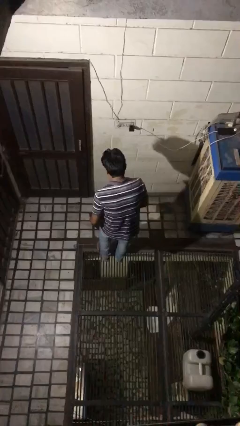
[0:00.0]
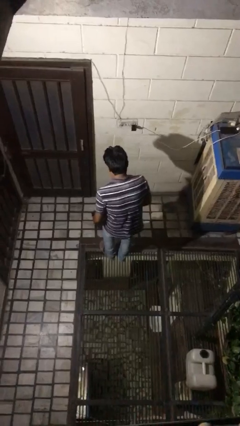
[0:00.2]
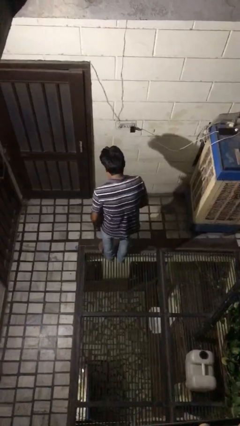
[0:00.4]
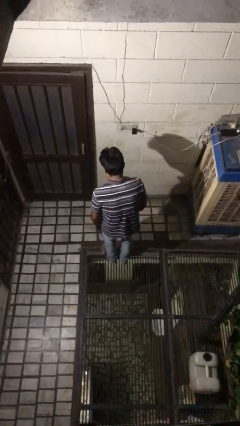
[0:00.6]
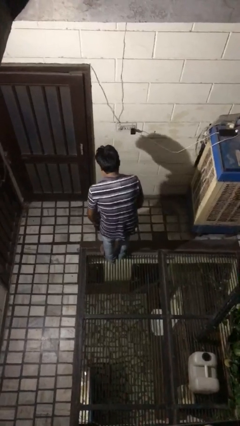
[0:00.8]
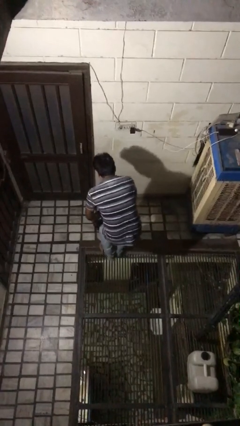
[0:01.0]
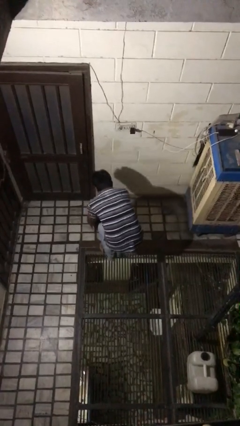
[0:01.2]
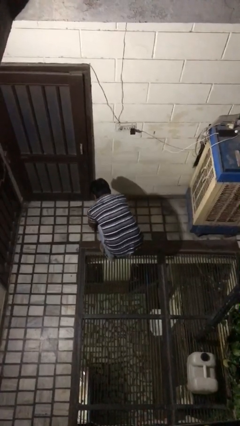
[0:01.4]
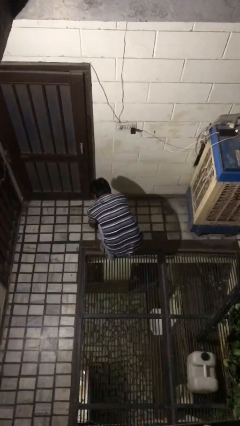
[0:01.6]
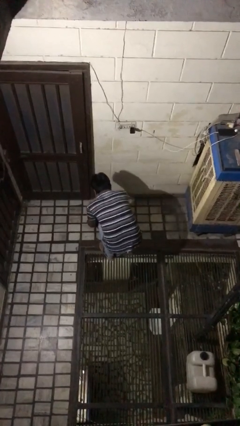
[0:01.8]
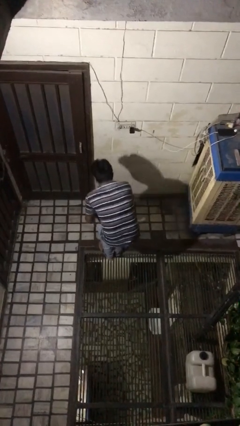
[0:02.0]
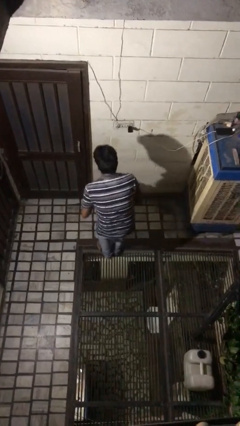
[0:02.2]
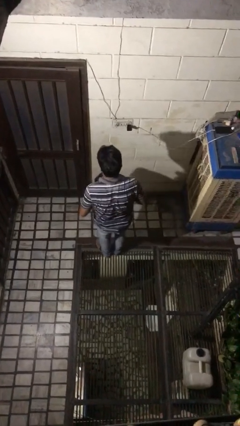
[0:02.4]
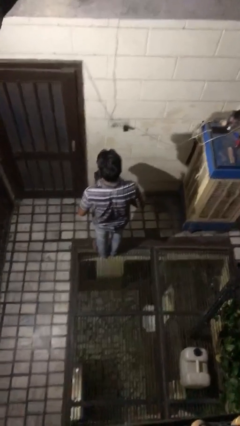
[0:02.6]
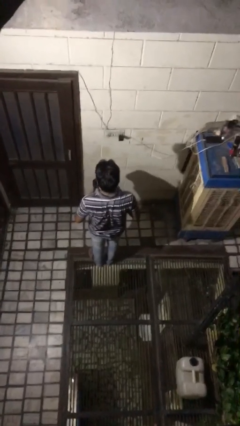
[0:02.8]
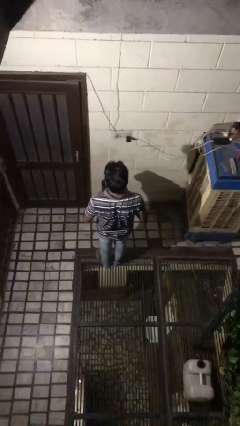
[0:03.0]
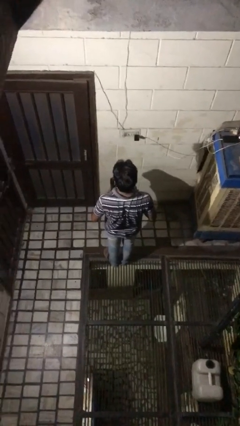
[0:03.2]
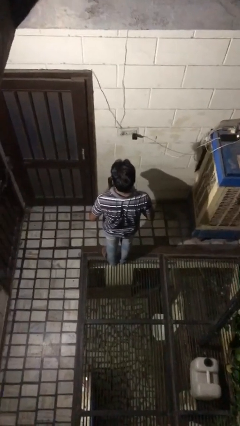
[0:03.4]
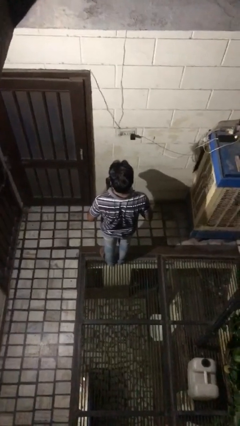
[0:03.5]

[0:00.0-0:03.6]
person picks up object from floor

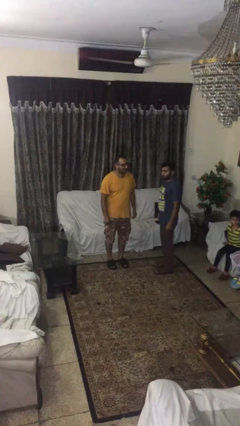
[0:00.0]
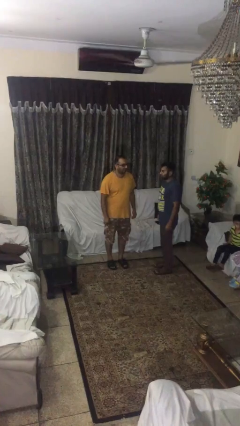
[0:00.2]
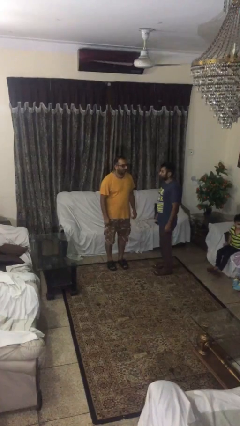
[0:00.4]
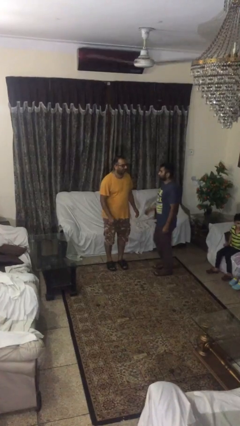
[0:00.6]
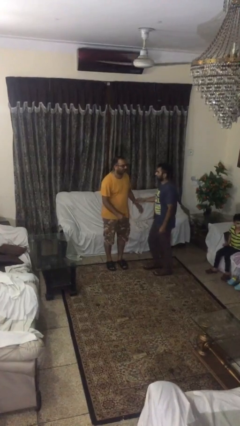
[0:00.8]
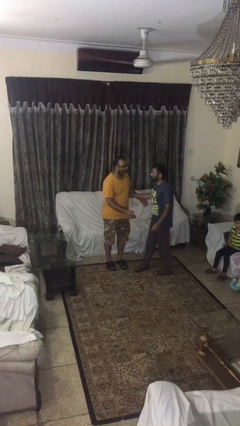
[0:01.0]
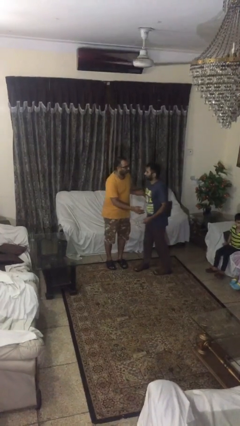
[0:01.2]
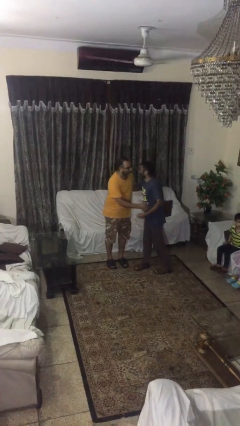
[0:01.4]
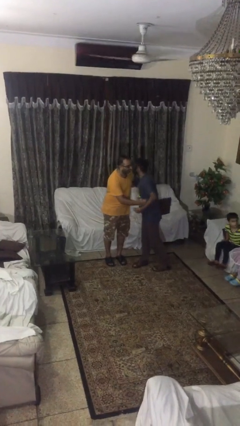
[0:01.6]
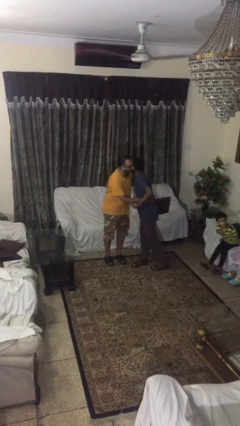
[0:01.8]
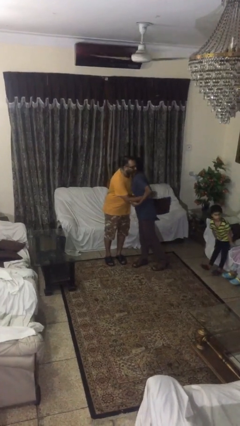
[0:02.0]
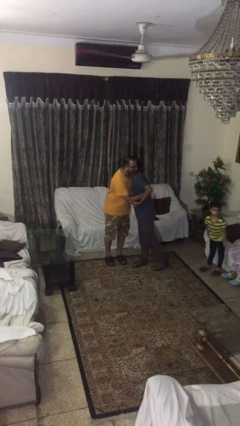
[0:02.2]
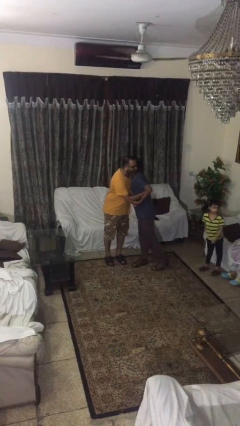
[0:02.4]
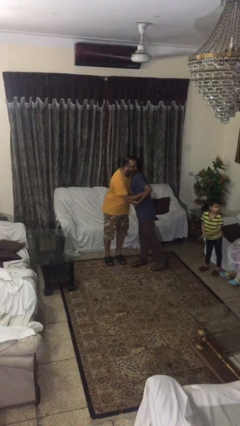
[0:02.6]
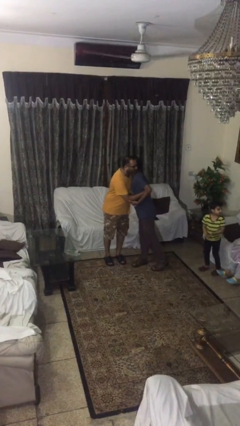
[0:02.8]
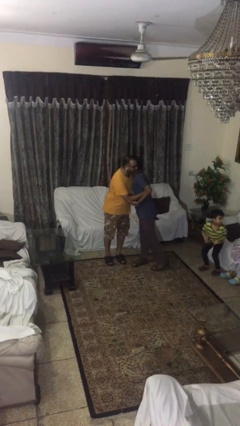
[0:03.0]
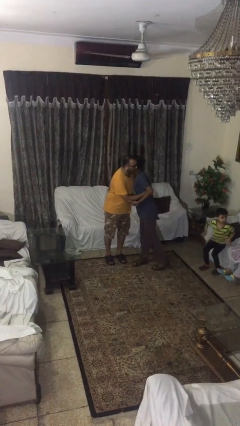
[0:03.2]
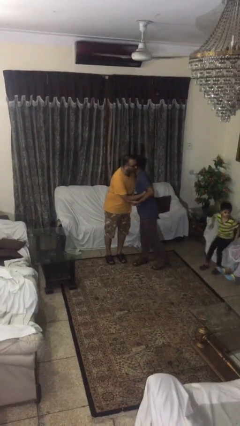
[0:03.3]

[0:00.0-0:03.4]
person embraces person

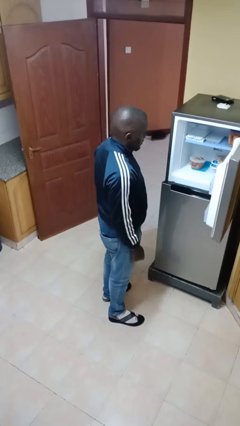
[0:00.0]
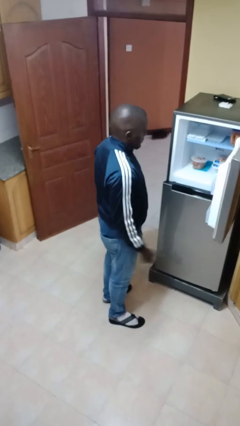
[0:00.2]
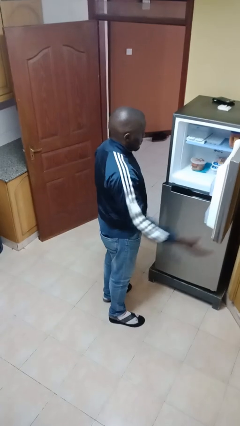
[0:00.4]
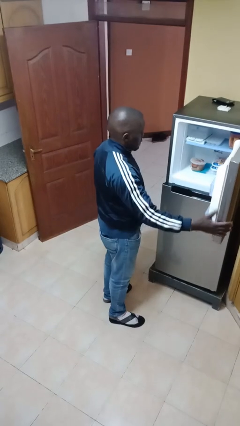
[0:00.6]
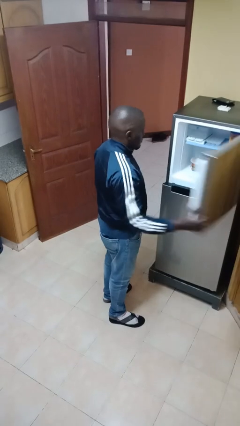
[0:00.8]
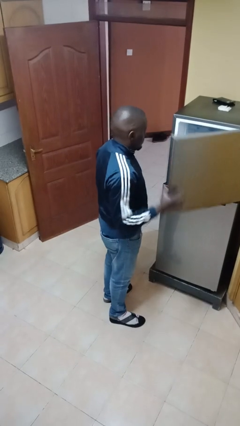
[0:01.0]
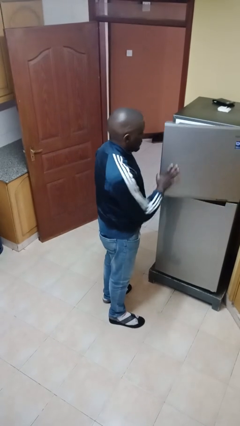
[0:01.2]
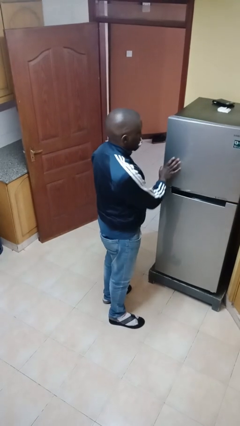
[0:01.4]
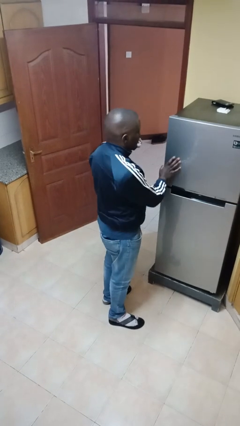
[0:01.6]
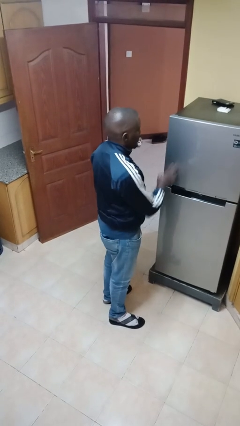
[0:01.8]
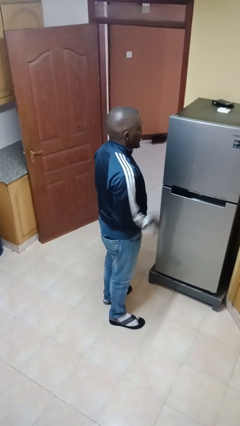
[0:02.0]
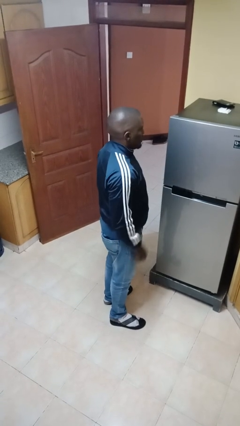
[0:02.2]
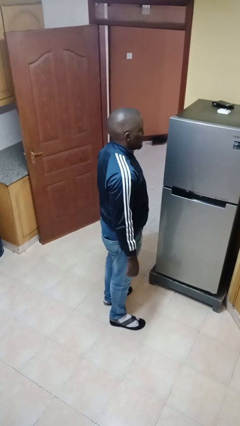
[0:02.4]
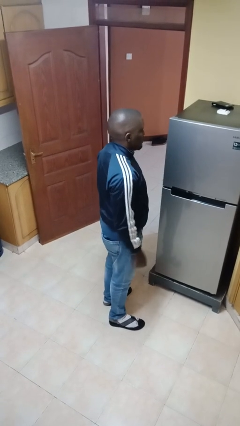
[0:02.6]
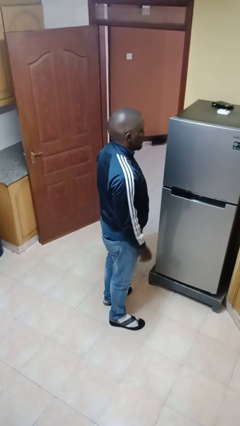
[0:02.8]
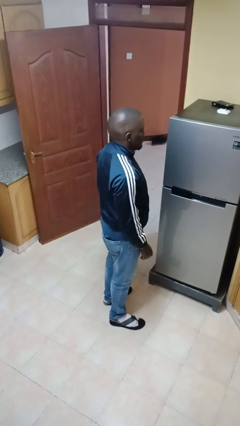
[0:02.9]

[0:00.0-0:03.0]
person closes refrigerator

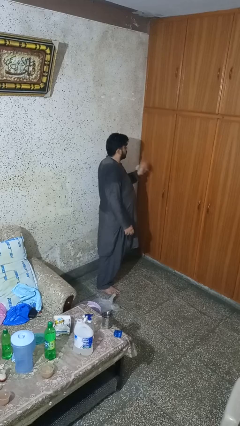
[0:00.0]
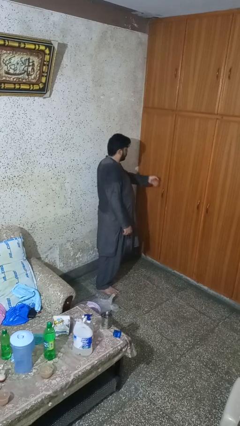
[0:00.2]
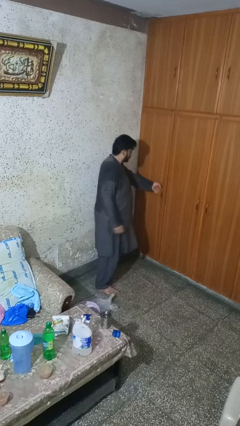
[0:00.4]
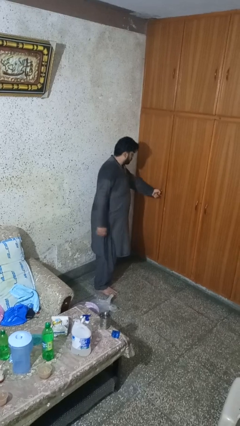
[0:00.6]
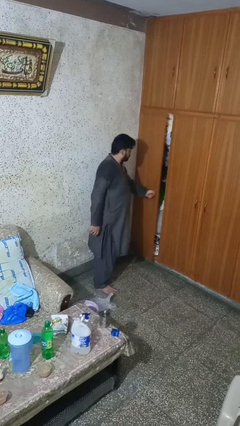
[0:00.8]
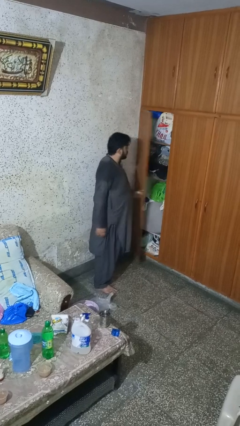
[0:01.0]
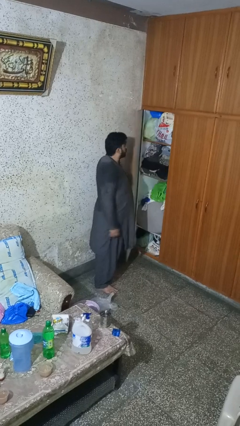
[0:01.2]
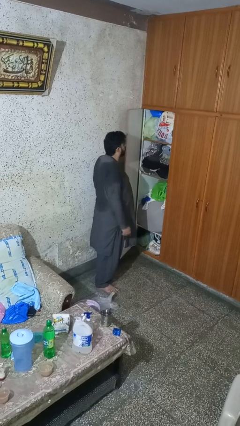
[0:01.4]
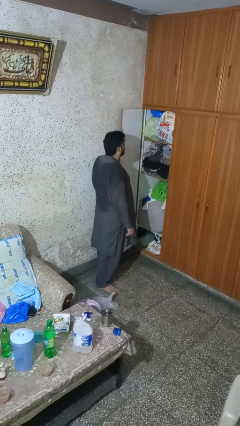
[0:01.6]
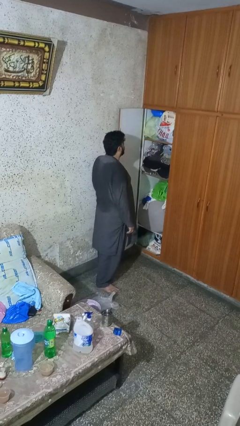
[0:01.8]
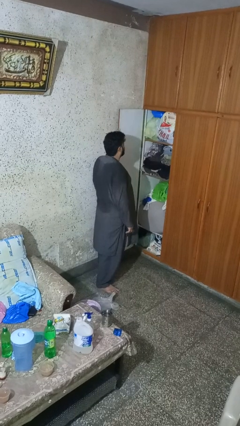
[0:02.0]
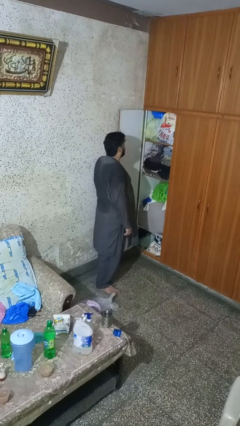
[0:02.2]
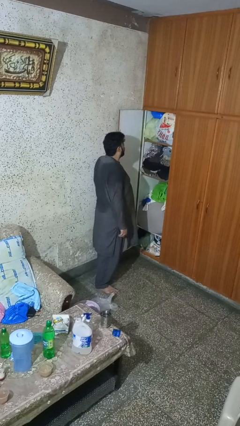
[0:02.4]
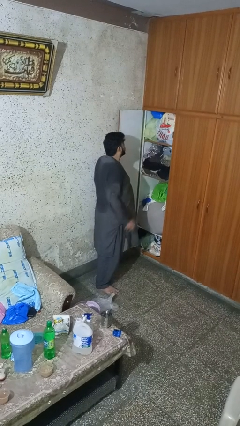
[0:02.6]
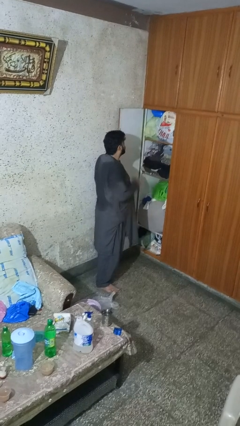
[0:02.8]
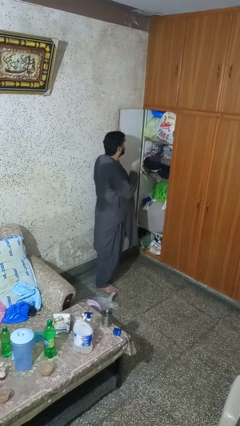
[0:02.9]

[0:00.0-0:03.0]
person opens closet door

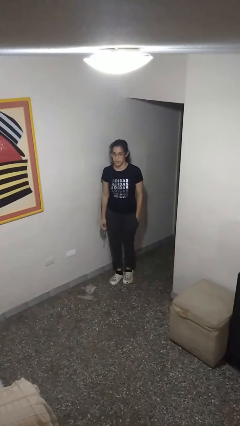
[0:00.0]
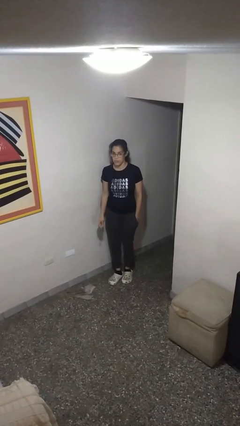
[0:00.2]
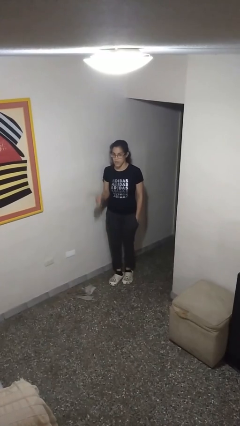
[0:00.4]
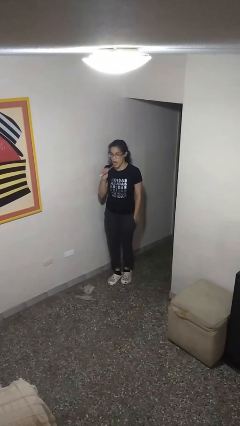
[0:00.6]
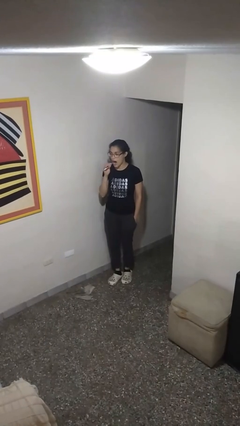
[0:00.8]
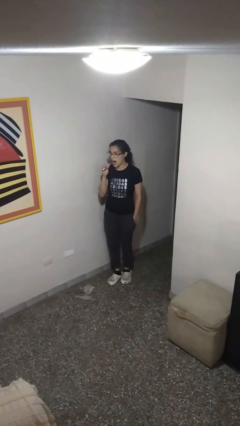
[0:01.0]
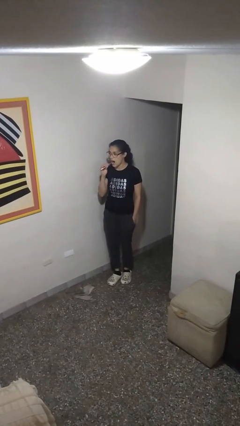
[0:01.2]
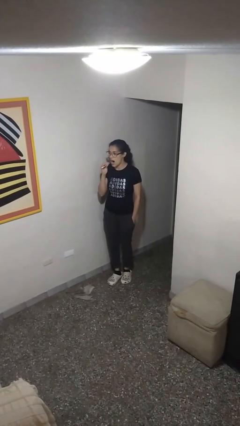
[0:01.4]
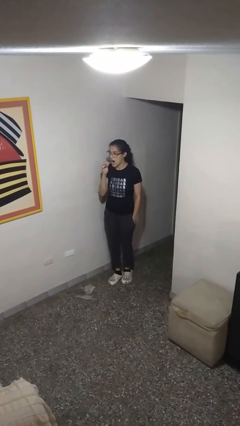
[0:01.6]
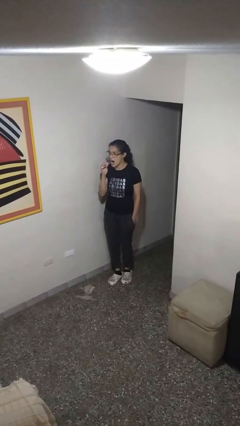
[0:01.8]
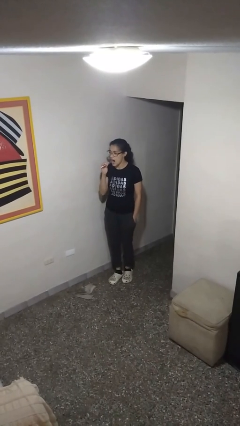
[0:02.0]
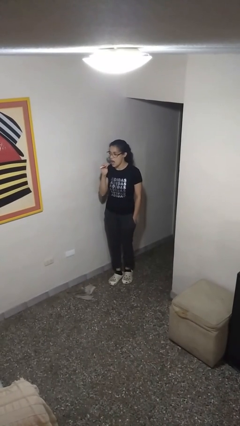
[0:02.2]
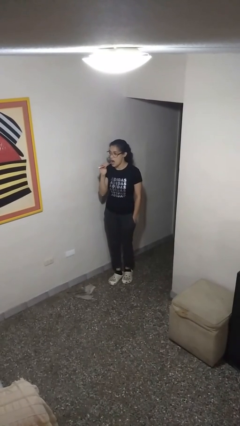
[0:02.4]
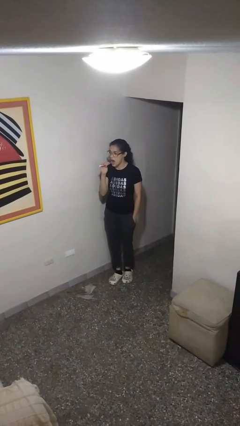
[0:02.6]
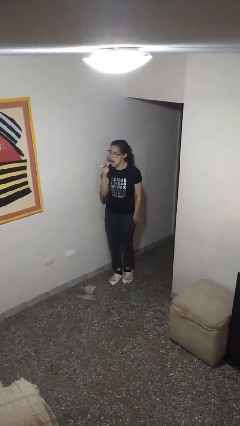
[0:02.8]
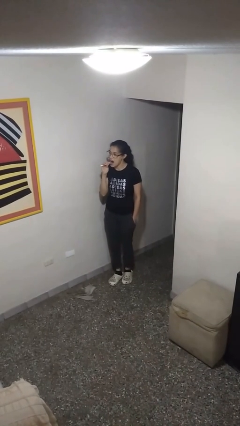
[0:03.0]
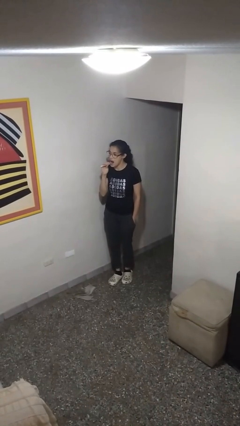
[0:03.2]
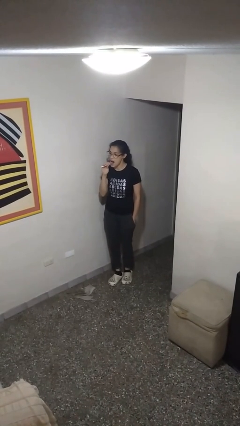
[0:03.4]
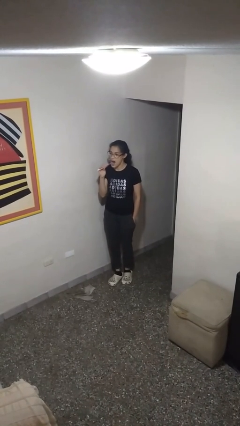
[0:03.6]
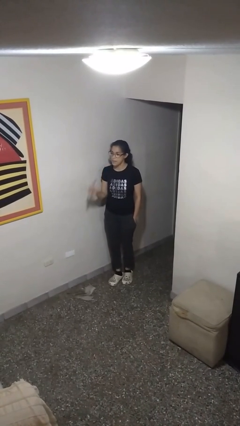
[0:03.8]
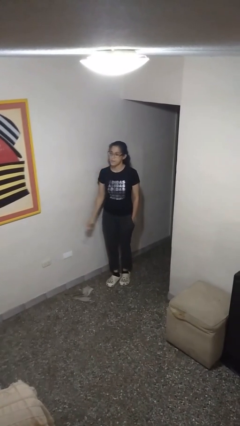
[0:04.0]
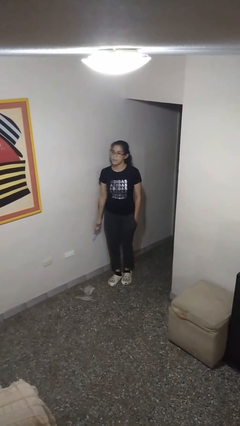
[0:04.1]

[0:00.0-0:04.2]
person brushes teeth

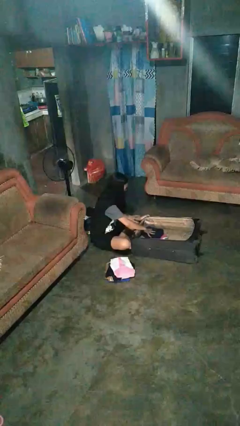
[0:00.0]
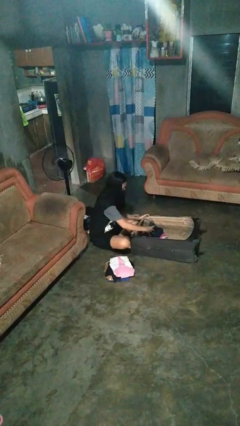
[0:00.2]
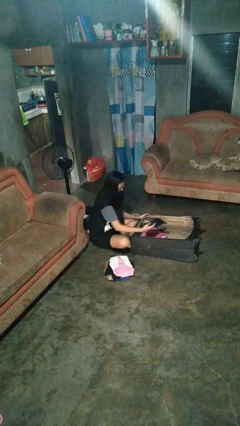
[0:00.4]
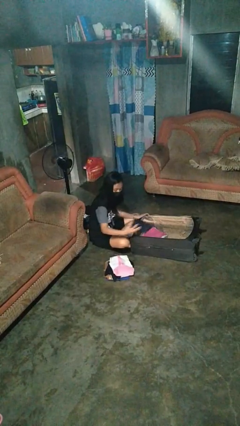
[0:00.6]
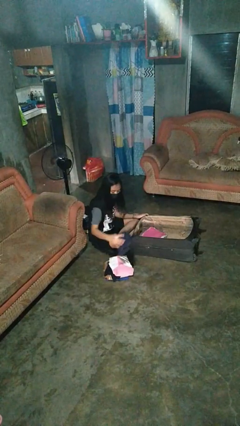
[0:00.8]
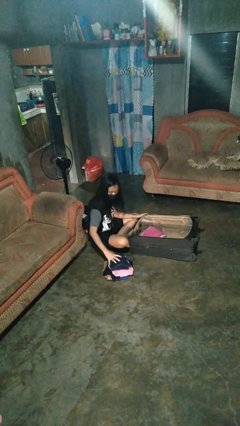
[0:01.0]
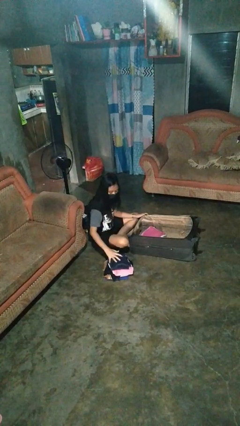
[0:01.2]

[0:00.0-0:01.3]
person unloads clothes from suitcase
